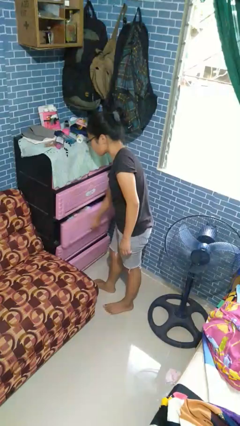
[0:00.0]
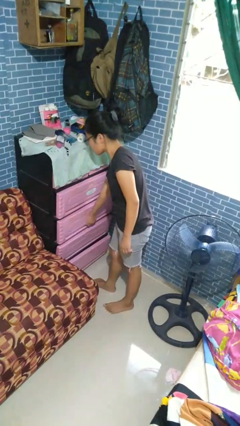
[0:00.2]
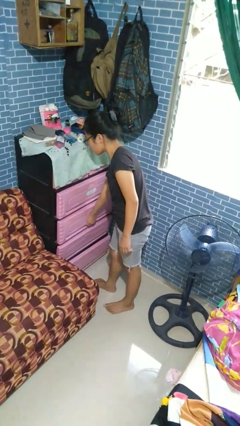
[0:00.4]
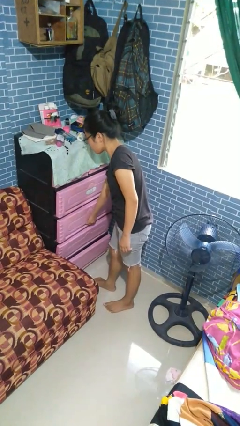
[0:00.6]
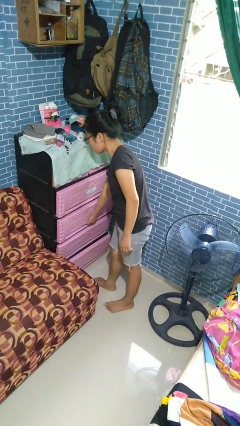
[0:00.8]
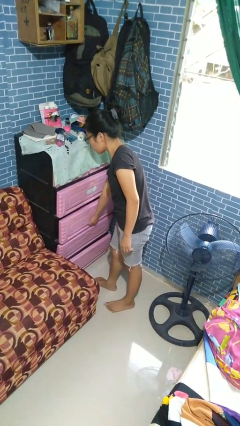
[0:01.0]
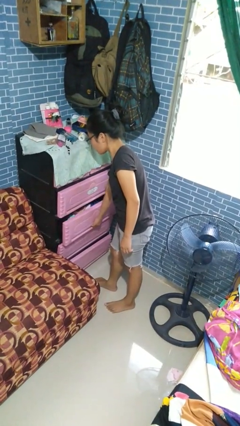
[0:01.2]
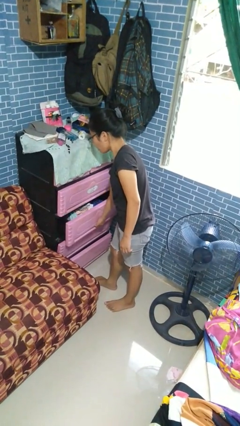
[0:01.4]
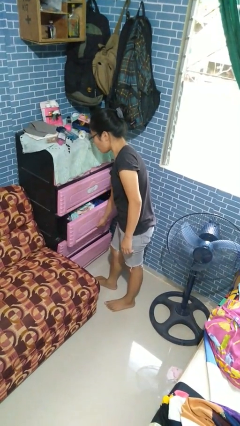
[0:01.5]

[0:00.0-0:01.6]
person closes dresser drawer

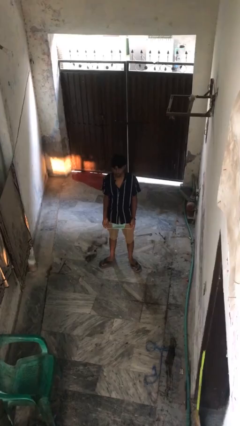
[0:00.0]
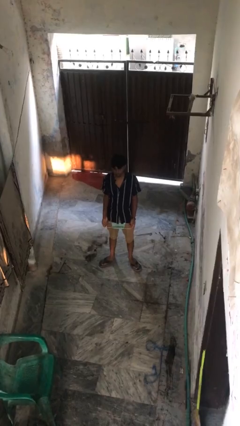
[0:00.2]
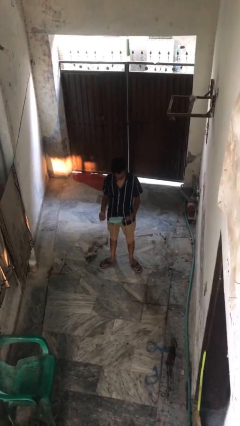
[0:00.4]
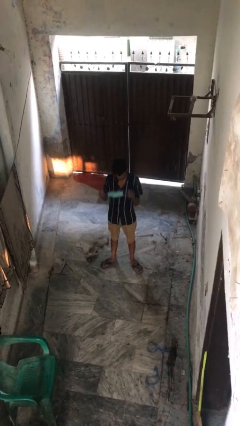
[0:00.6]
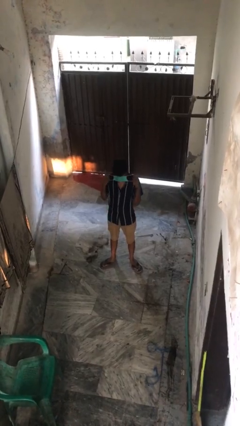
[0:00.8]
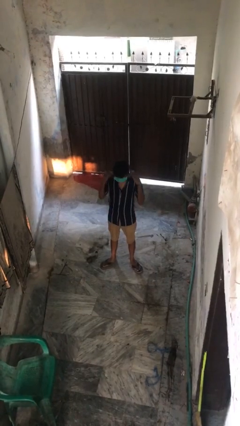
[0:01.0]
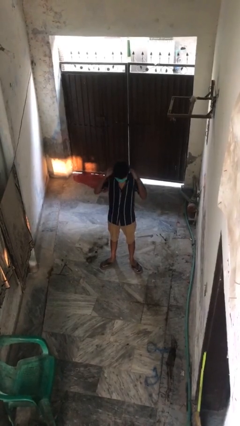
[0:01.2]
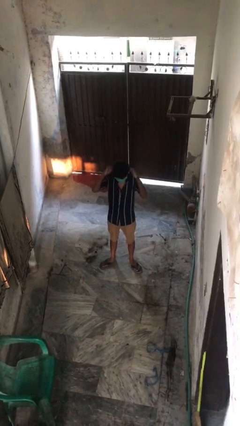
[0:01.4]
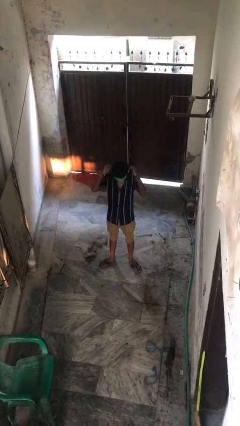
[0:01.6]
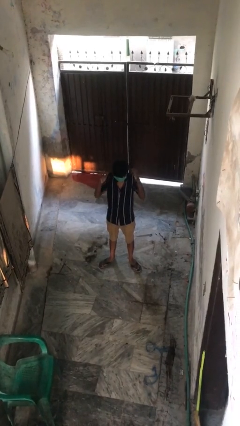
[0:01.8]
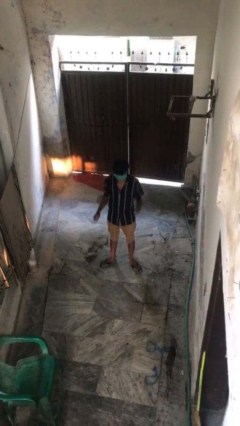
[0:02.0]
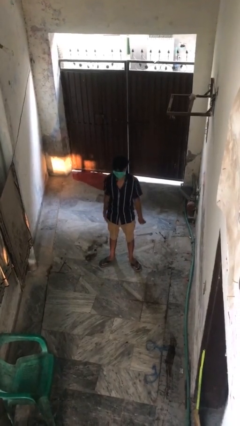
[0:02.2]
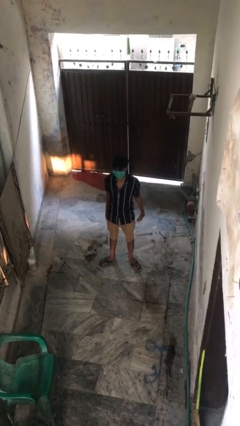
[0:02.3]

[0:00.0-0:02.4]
person puts on facemask

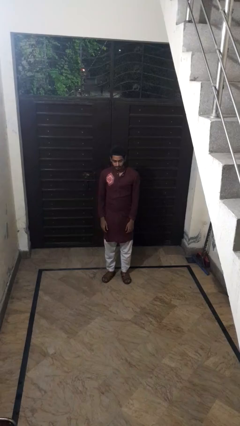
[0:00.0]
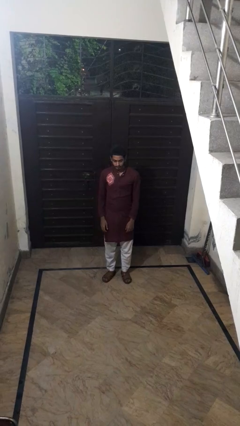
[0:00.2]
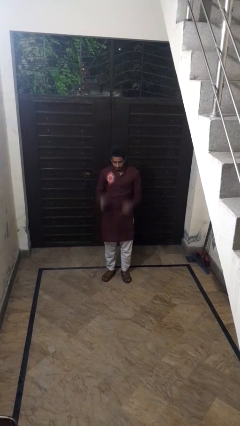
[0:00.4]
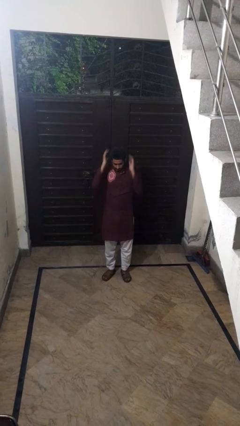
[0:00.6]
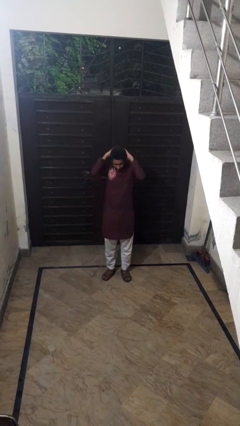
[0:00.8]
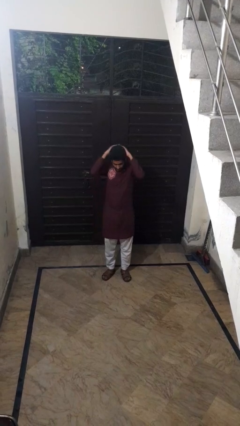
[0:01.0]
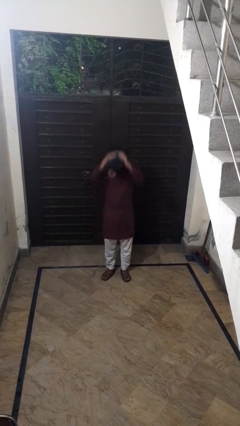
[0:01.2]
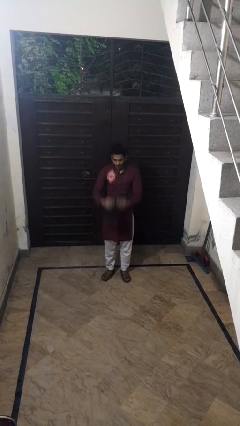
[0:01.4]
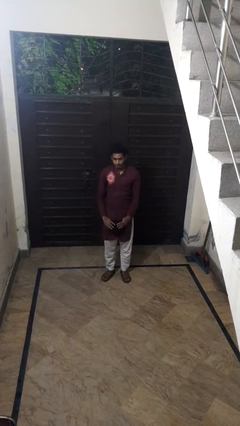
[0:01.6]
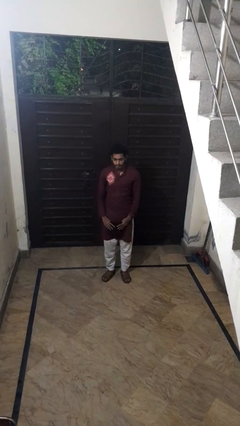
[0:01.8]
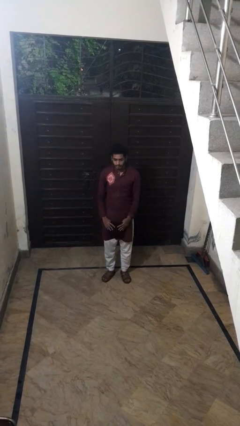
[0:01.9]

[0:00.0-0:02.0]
person takes off hat

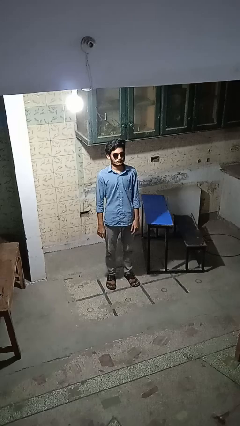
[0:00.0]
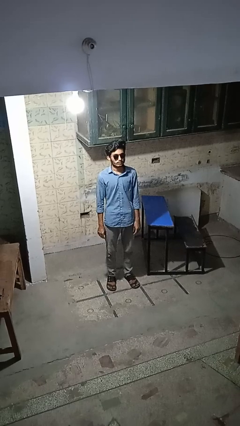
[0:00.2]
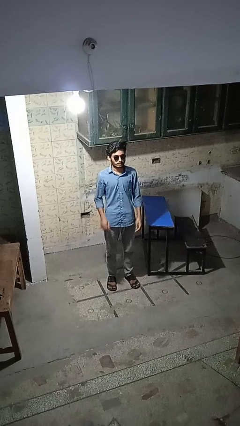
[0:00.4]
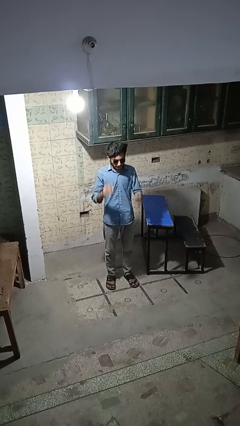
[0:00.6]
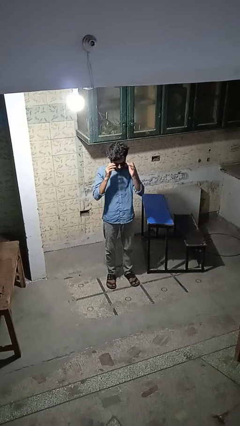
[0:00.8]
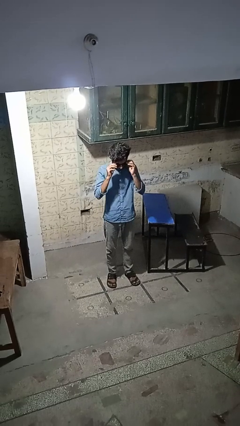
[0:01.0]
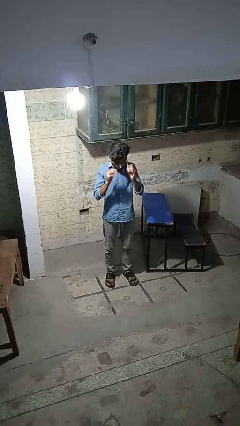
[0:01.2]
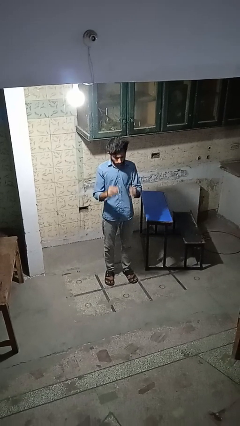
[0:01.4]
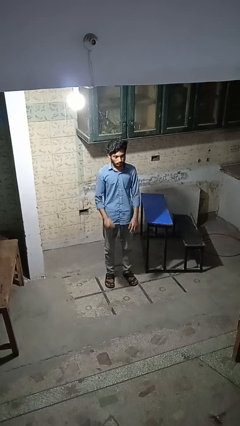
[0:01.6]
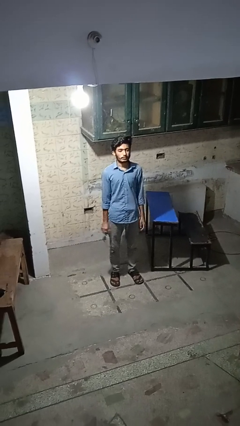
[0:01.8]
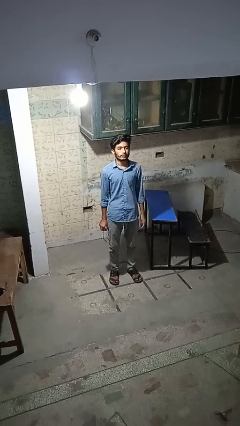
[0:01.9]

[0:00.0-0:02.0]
person takes off sunglasses

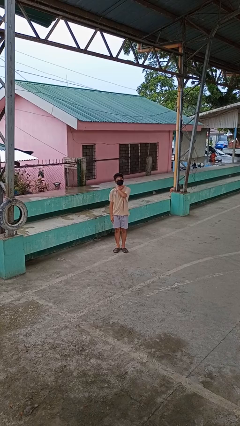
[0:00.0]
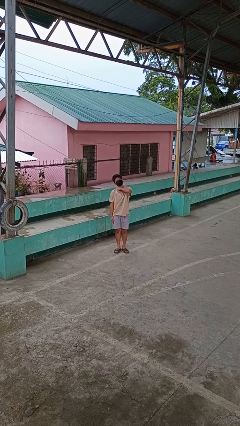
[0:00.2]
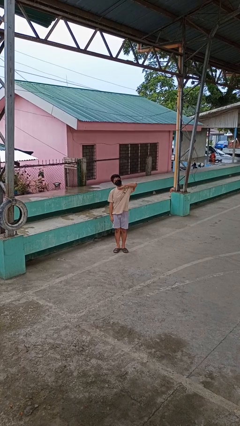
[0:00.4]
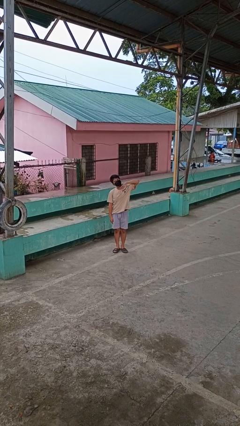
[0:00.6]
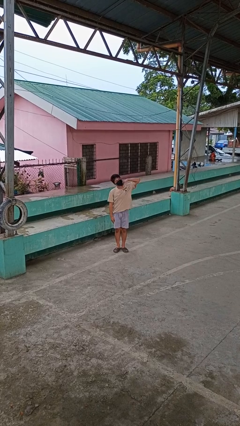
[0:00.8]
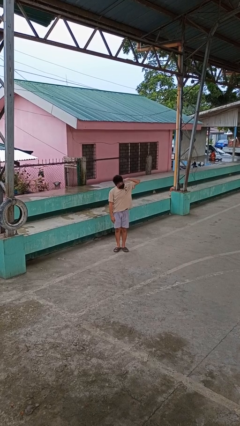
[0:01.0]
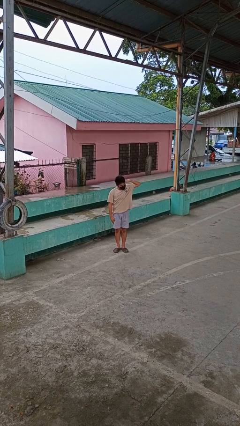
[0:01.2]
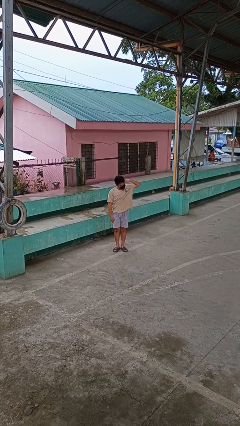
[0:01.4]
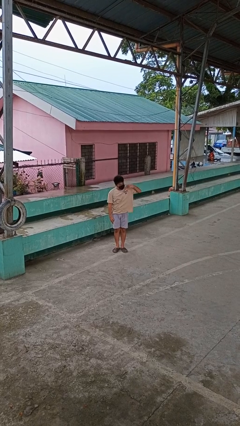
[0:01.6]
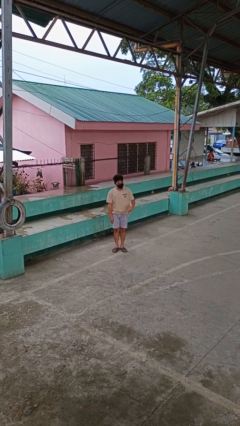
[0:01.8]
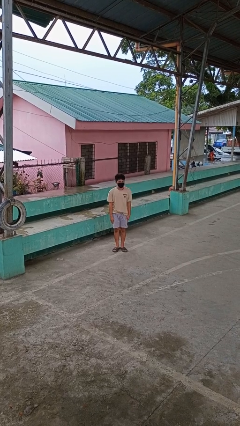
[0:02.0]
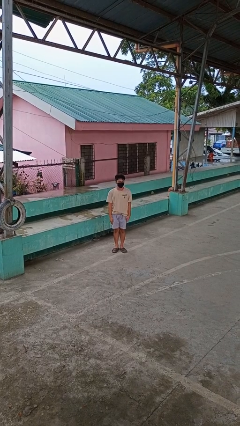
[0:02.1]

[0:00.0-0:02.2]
person gestures cut

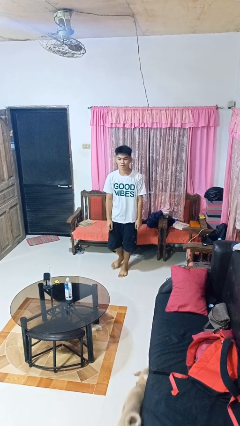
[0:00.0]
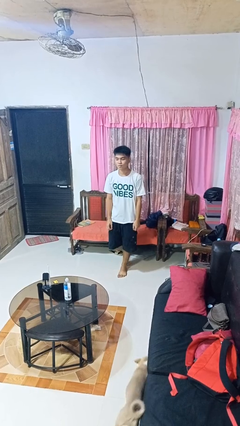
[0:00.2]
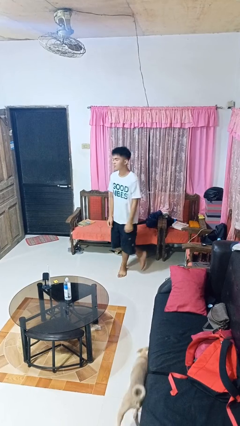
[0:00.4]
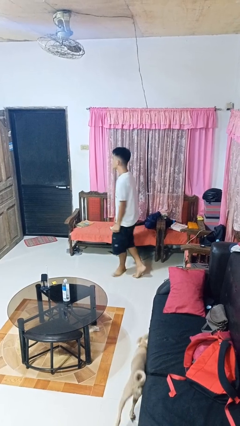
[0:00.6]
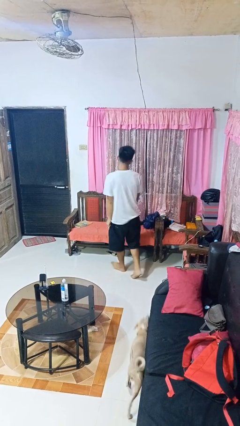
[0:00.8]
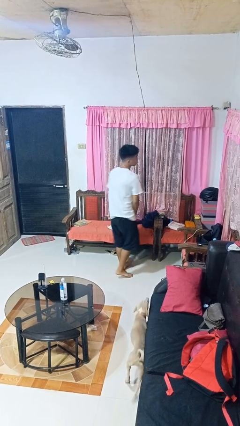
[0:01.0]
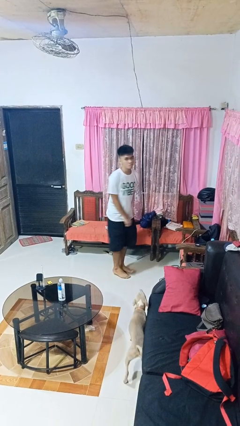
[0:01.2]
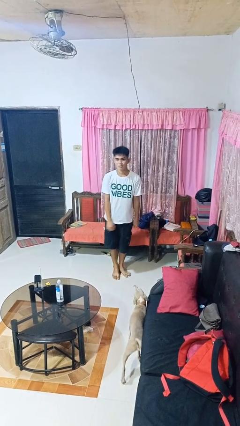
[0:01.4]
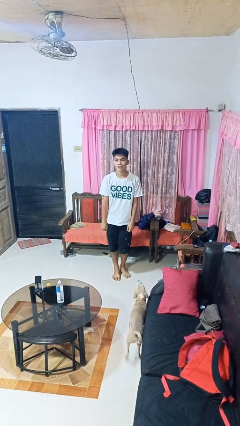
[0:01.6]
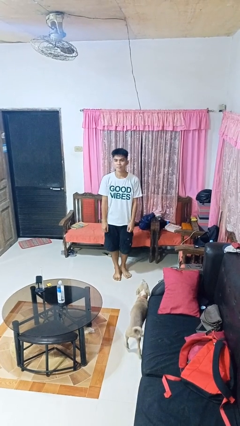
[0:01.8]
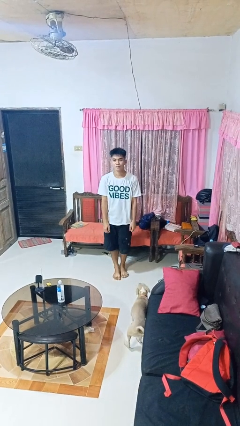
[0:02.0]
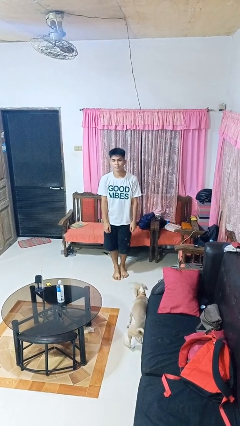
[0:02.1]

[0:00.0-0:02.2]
person twirls

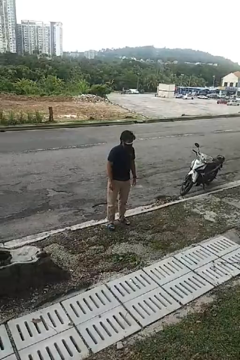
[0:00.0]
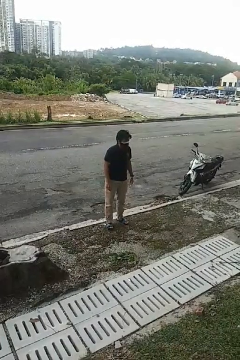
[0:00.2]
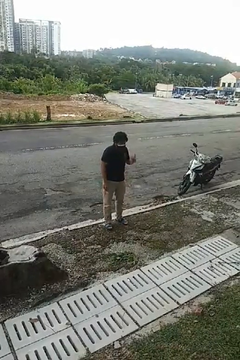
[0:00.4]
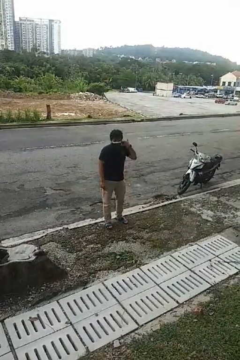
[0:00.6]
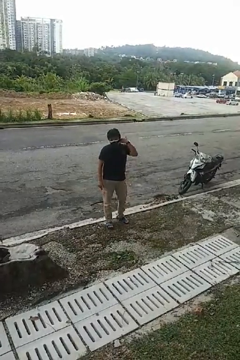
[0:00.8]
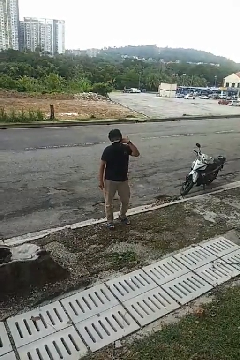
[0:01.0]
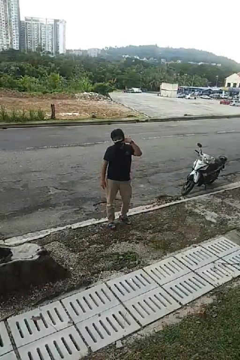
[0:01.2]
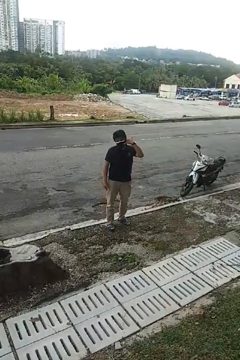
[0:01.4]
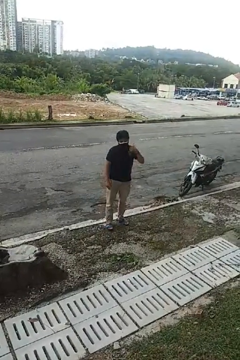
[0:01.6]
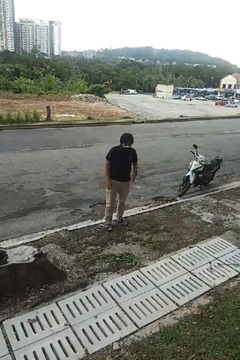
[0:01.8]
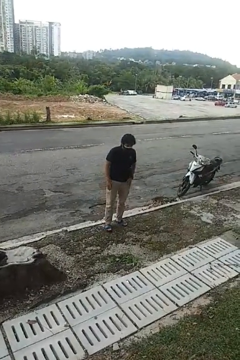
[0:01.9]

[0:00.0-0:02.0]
person gestures call me

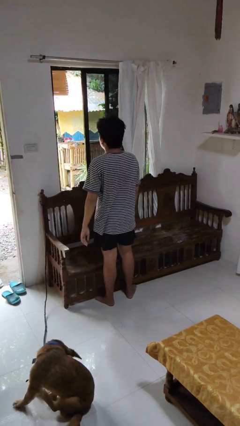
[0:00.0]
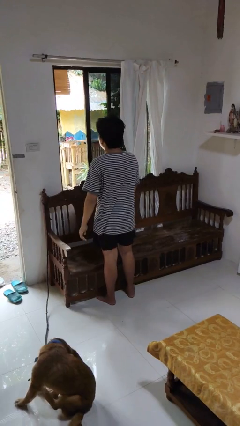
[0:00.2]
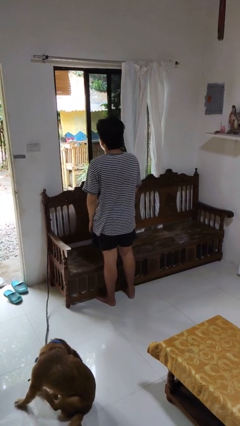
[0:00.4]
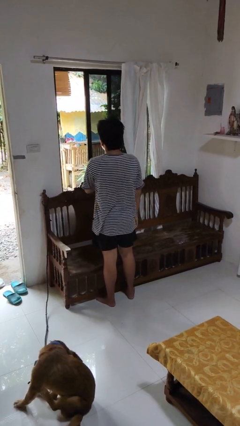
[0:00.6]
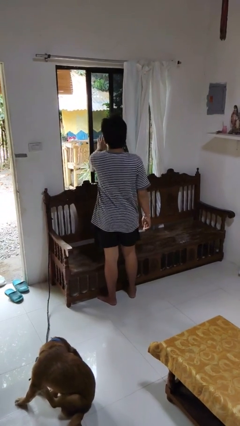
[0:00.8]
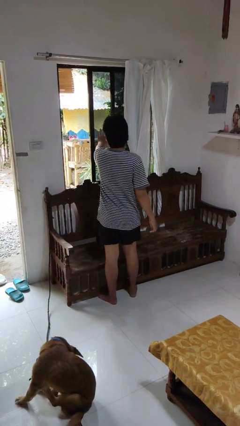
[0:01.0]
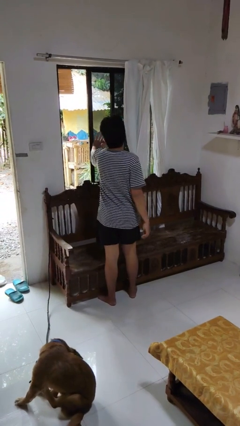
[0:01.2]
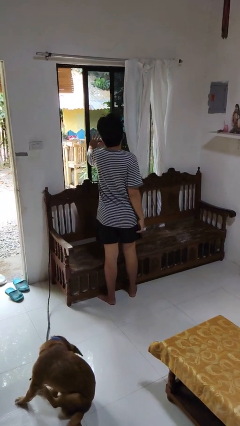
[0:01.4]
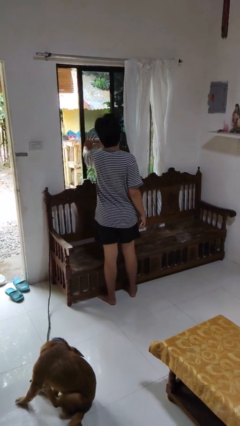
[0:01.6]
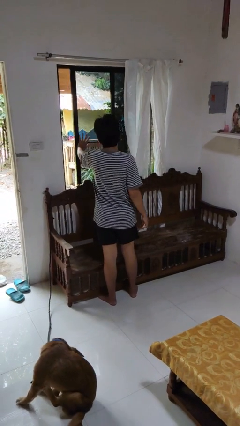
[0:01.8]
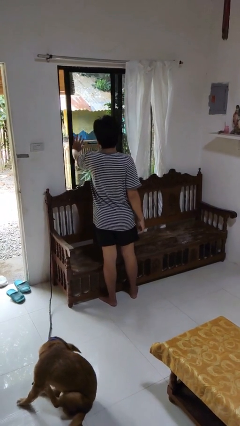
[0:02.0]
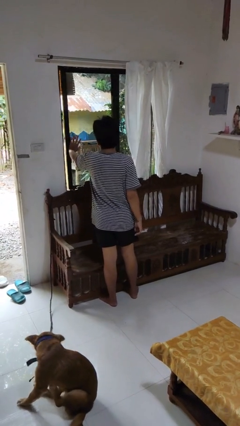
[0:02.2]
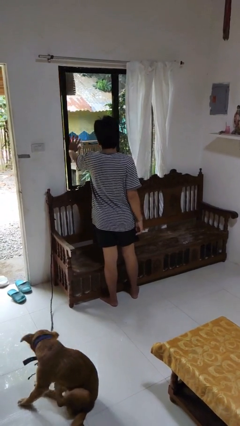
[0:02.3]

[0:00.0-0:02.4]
person closes home window

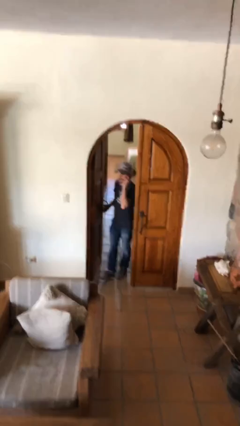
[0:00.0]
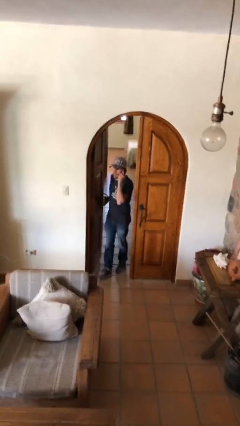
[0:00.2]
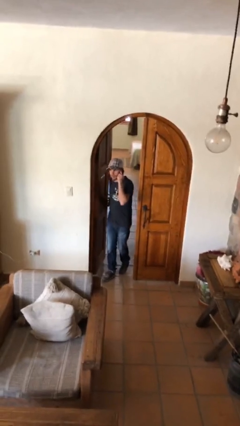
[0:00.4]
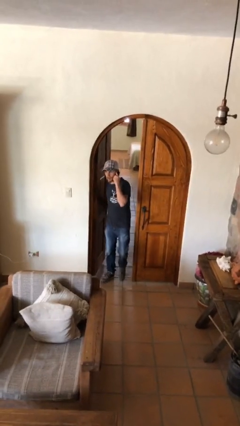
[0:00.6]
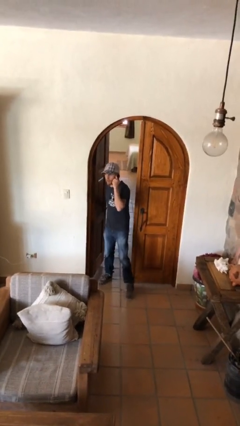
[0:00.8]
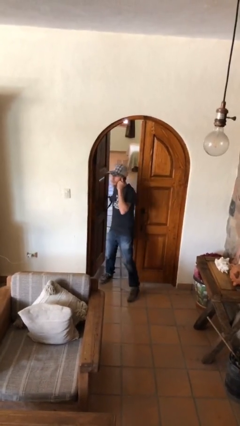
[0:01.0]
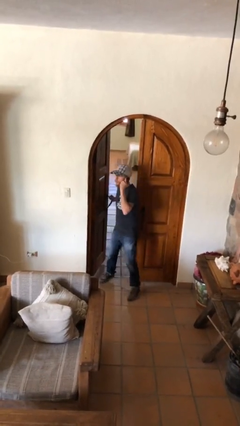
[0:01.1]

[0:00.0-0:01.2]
person enters scene through structure
